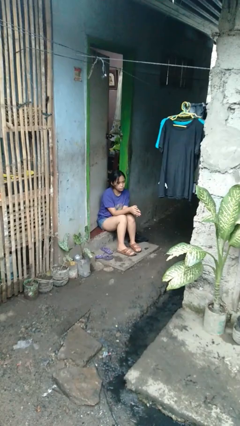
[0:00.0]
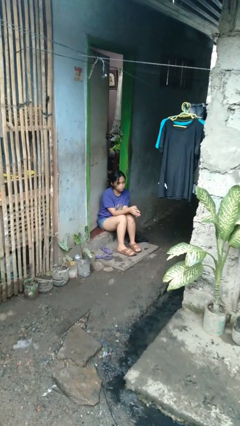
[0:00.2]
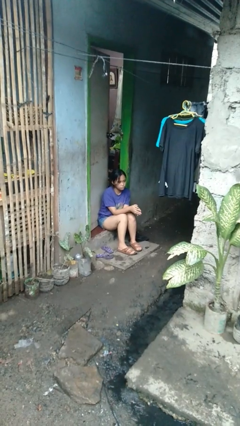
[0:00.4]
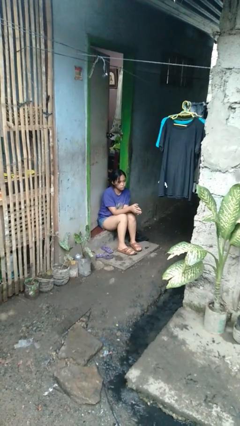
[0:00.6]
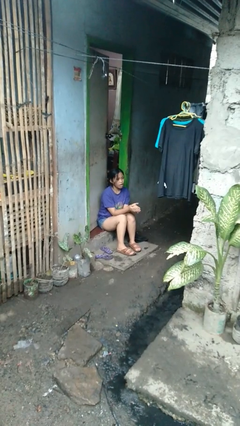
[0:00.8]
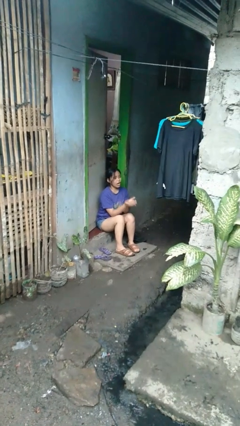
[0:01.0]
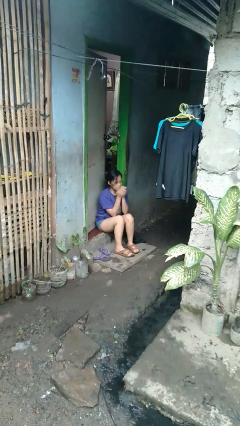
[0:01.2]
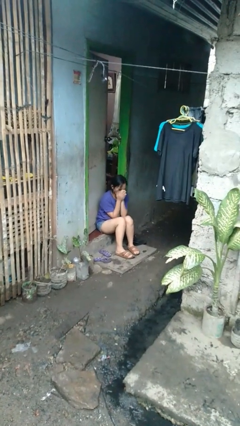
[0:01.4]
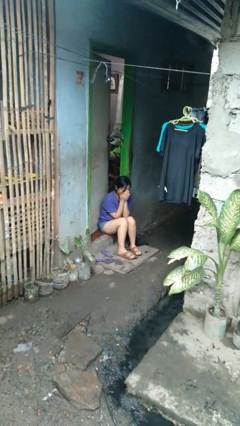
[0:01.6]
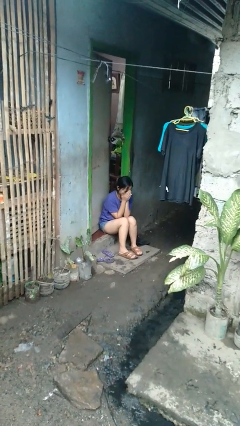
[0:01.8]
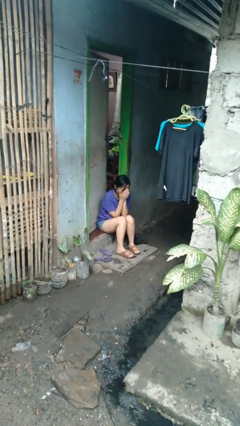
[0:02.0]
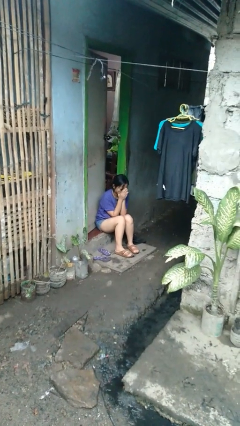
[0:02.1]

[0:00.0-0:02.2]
person sneezes into hand

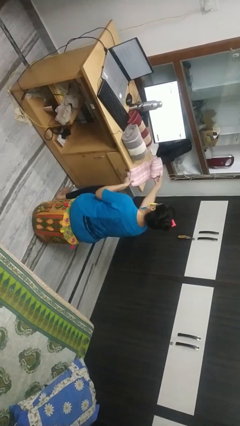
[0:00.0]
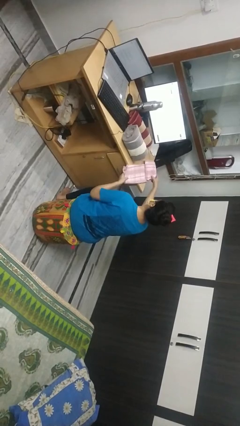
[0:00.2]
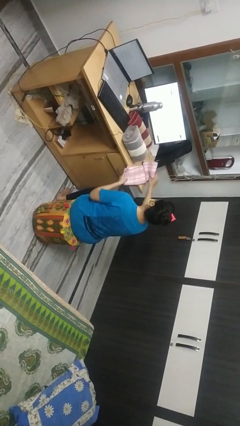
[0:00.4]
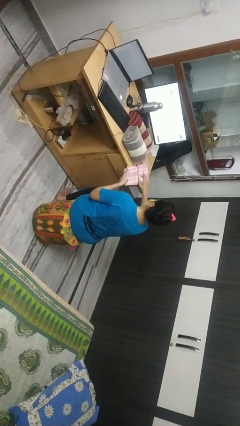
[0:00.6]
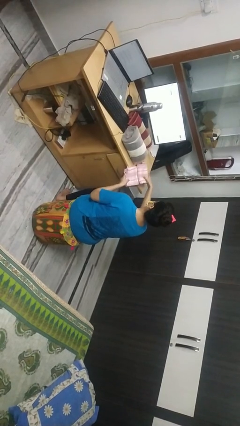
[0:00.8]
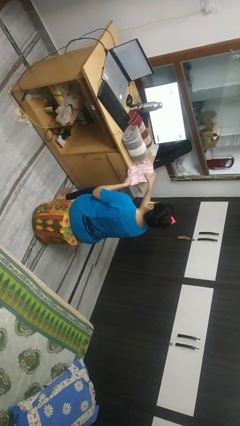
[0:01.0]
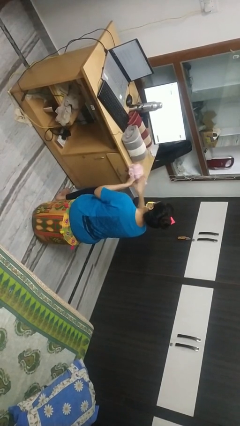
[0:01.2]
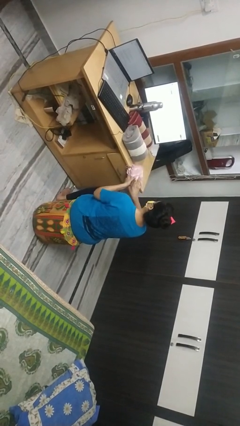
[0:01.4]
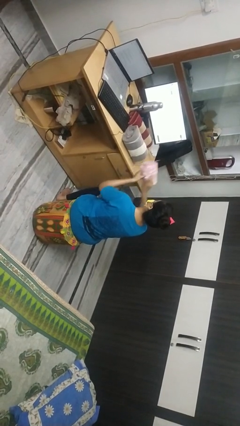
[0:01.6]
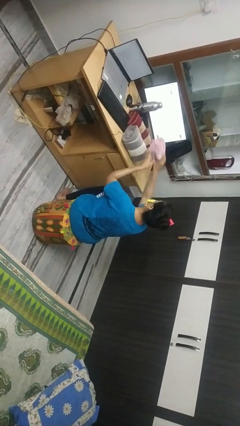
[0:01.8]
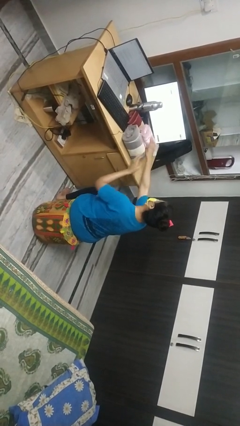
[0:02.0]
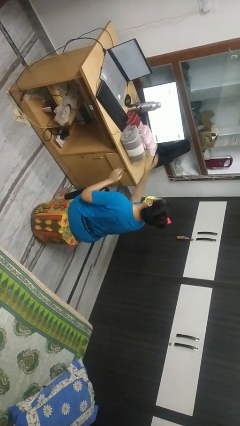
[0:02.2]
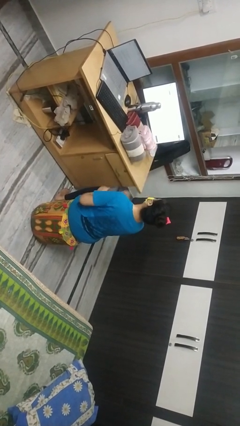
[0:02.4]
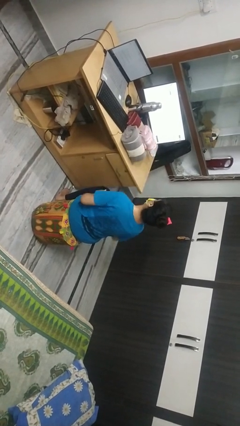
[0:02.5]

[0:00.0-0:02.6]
person folds towel

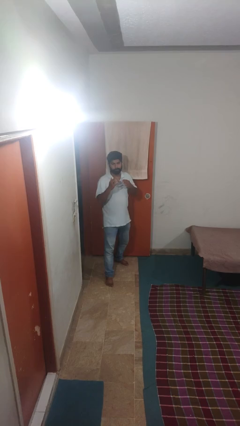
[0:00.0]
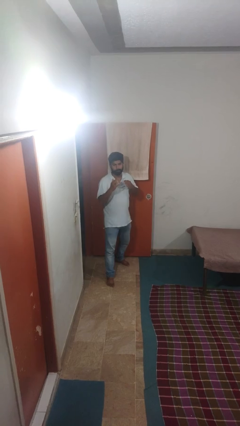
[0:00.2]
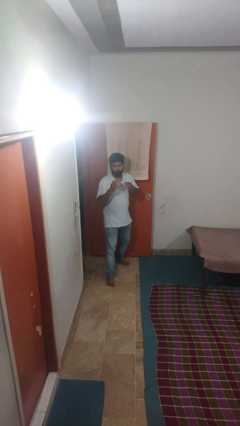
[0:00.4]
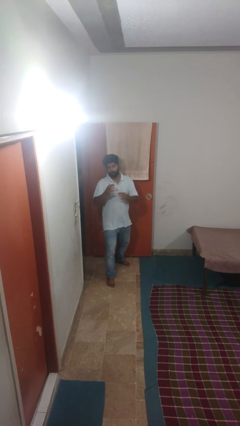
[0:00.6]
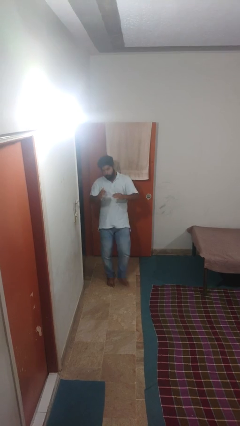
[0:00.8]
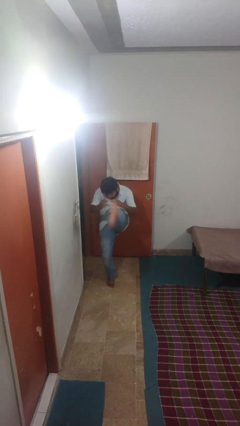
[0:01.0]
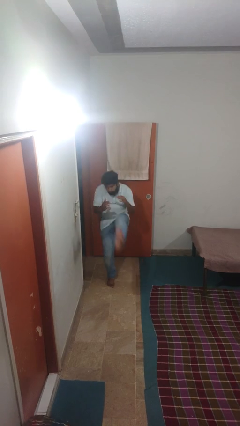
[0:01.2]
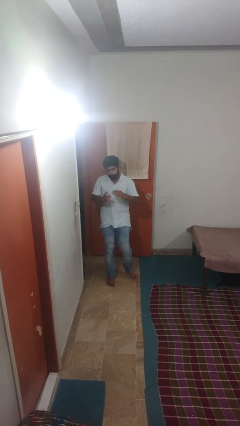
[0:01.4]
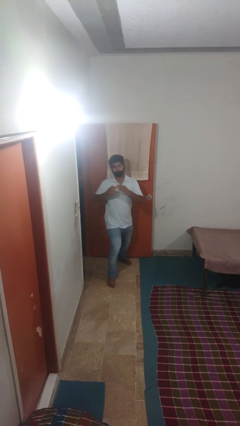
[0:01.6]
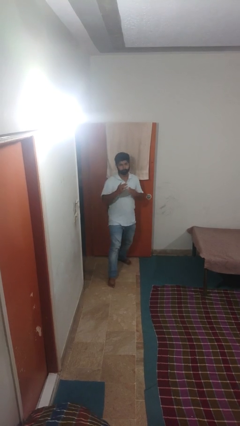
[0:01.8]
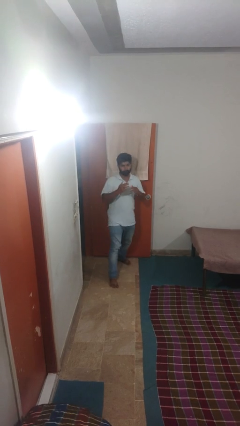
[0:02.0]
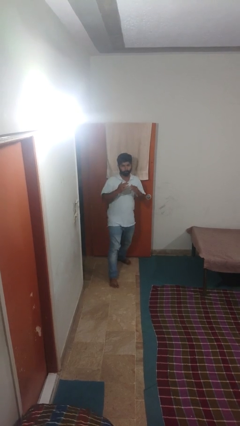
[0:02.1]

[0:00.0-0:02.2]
person karate kicks

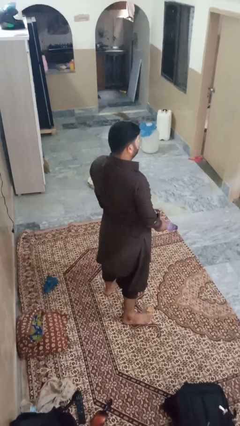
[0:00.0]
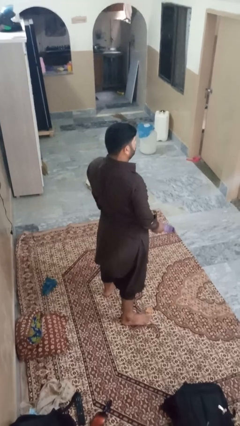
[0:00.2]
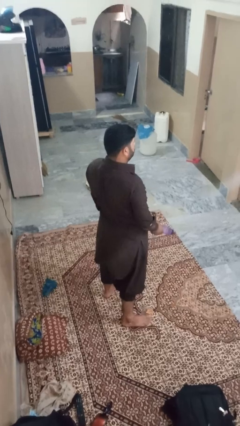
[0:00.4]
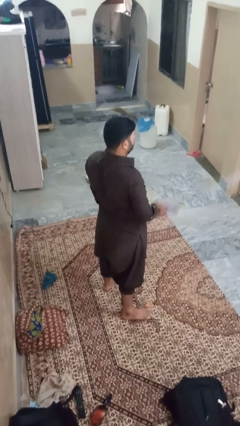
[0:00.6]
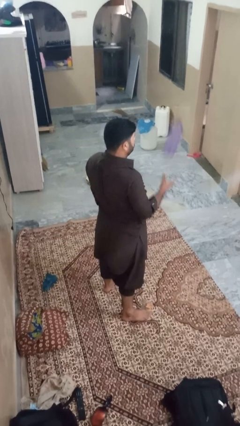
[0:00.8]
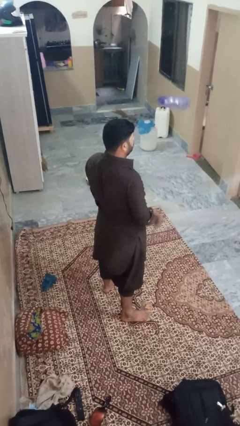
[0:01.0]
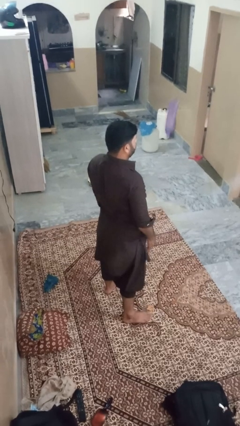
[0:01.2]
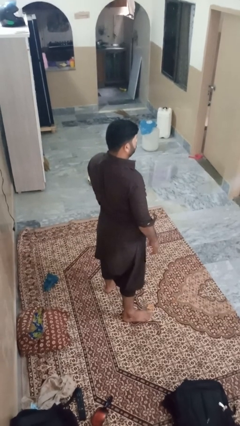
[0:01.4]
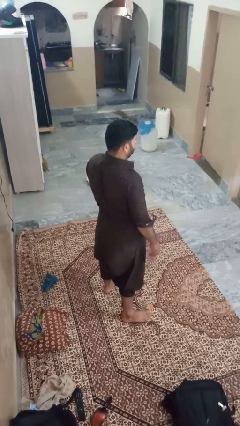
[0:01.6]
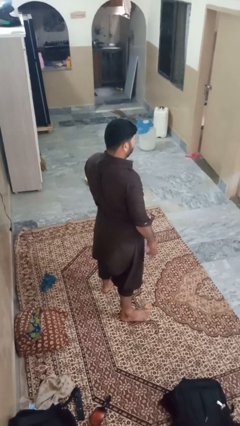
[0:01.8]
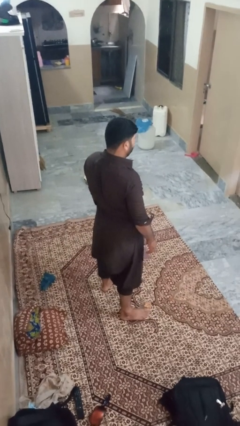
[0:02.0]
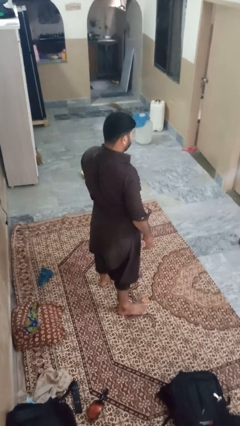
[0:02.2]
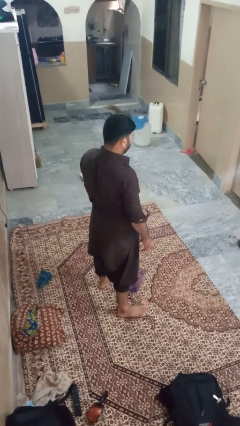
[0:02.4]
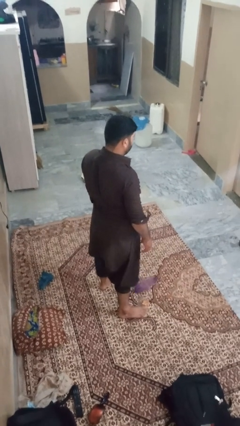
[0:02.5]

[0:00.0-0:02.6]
person throws object into air

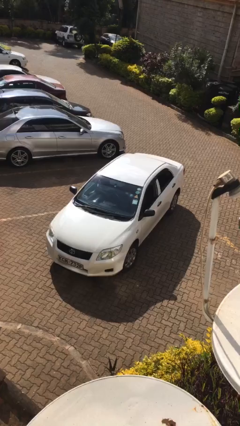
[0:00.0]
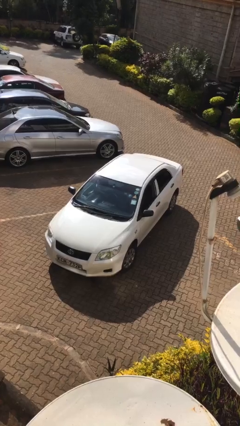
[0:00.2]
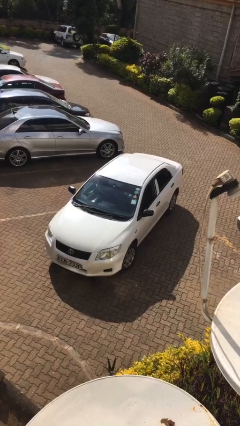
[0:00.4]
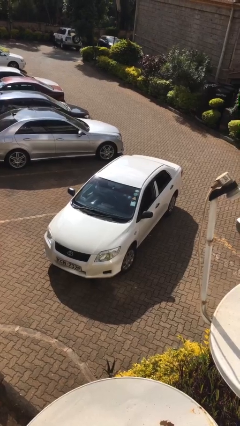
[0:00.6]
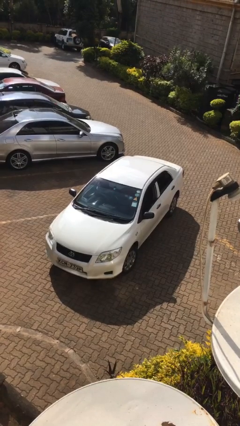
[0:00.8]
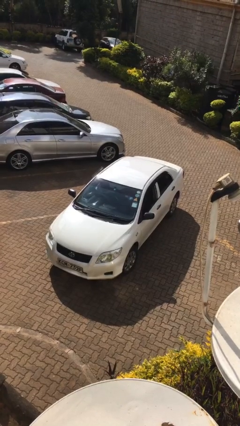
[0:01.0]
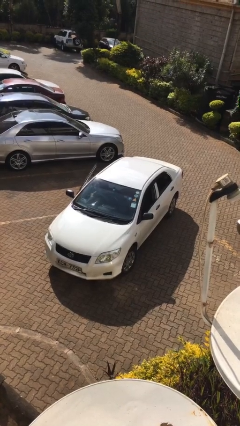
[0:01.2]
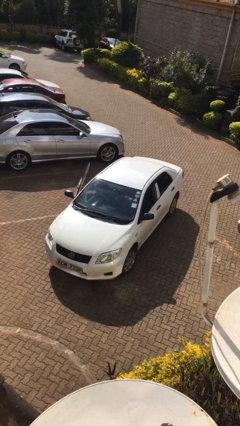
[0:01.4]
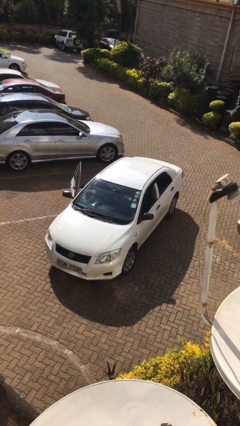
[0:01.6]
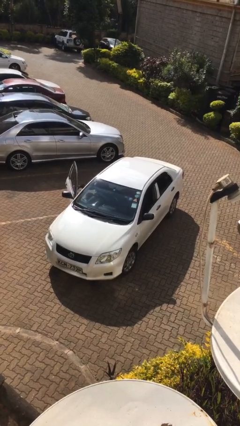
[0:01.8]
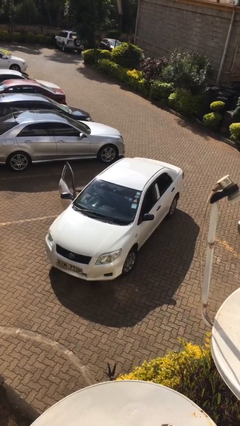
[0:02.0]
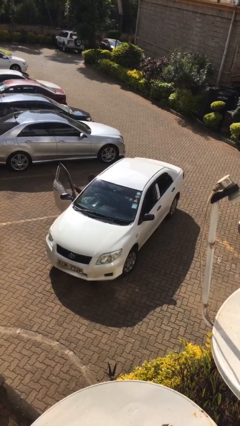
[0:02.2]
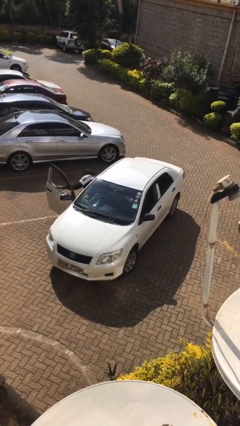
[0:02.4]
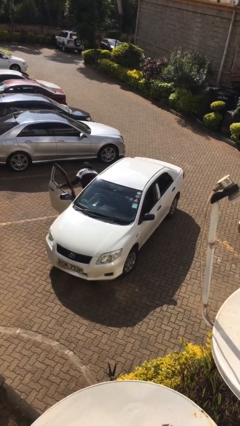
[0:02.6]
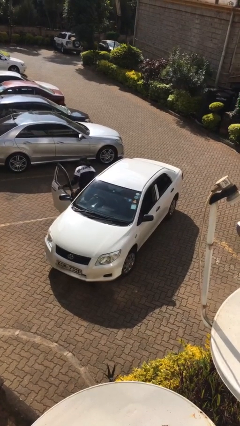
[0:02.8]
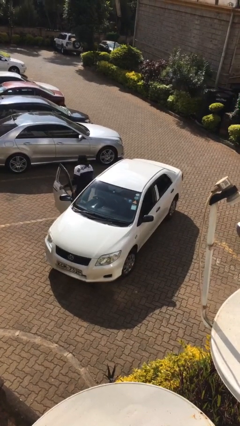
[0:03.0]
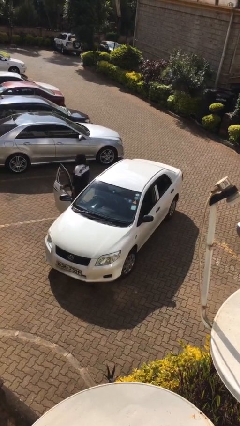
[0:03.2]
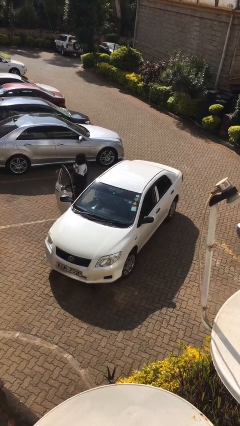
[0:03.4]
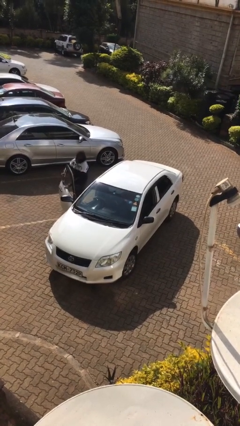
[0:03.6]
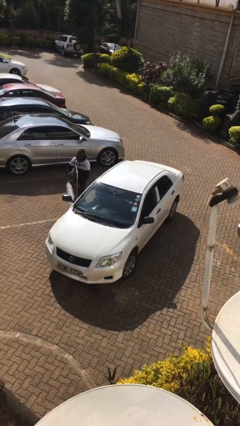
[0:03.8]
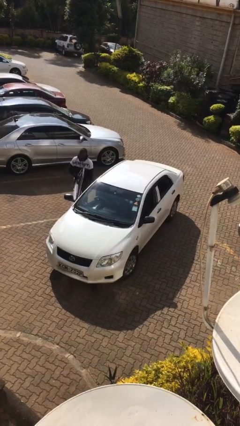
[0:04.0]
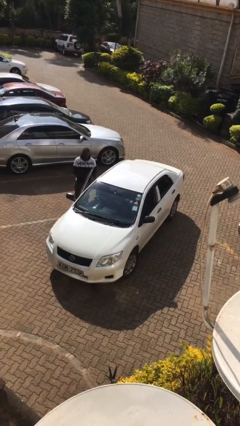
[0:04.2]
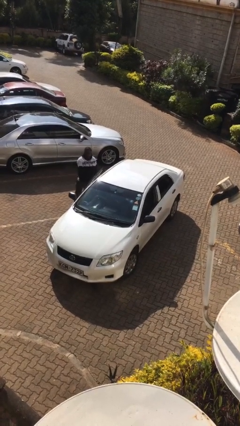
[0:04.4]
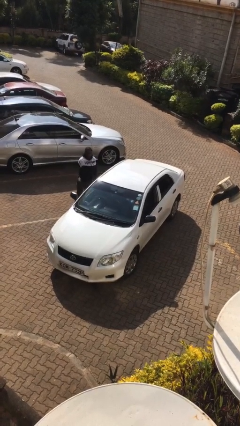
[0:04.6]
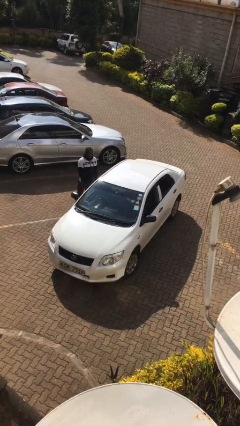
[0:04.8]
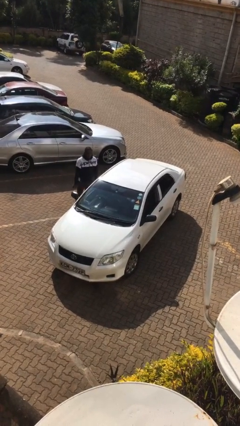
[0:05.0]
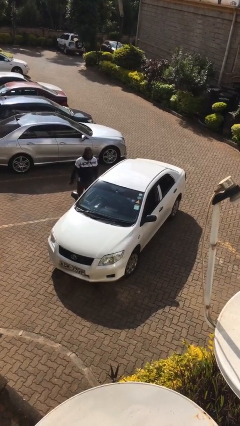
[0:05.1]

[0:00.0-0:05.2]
car drops off person

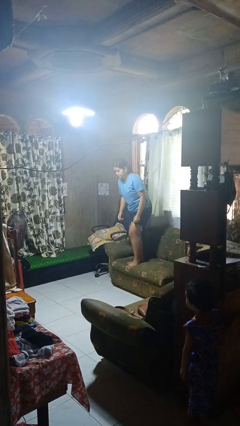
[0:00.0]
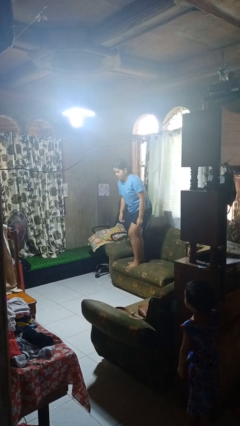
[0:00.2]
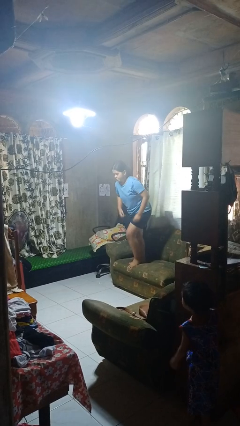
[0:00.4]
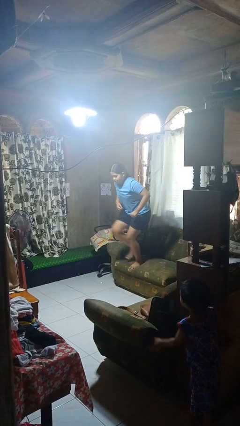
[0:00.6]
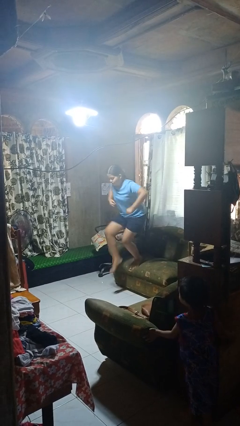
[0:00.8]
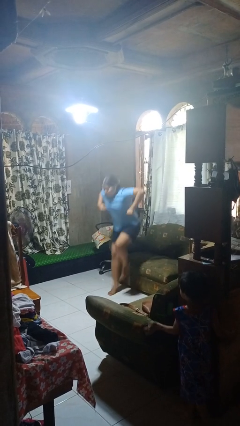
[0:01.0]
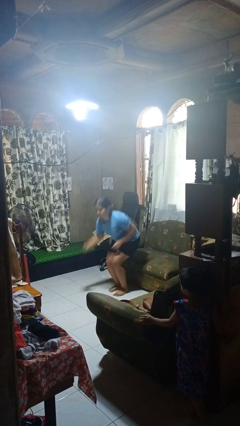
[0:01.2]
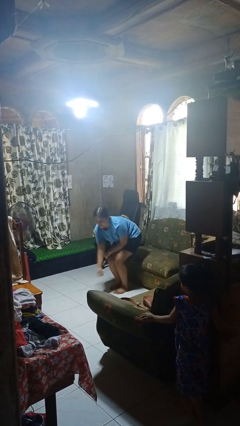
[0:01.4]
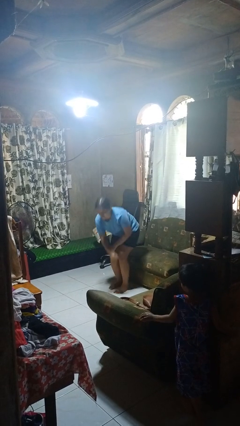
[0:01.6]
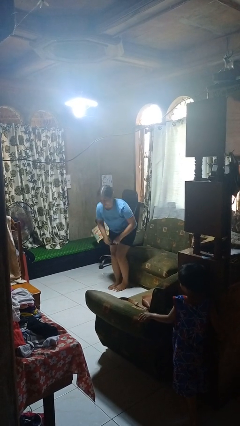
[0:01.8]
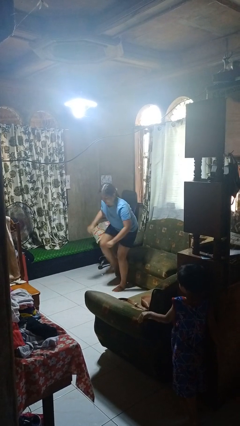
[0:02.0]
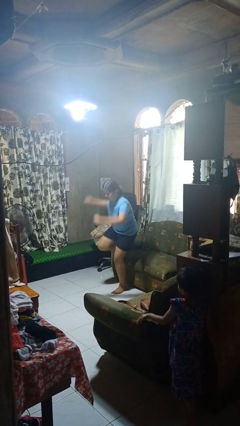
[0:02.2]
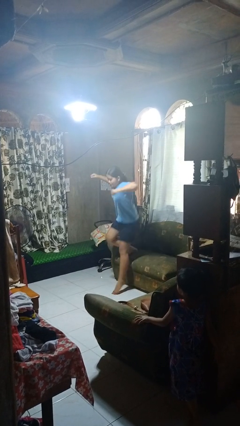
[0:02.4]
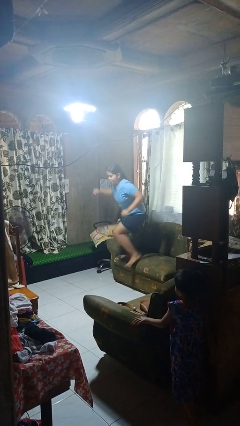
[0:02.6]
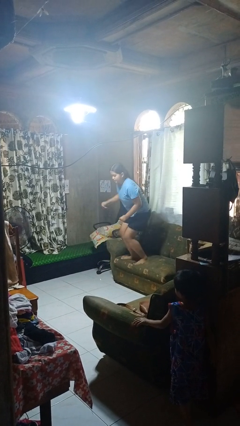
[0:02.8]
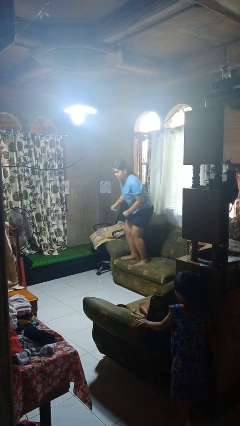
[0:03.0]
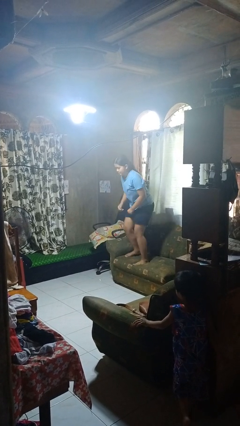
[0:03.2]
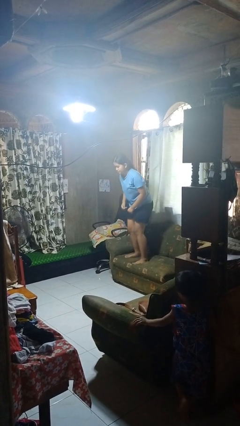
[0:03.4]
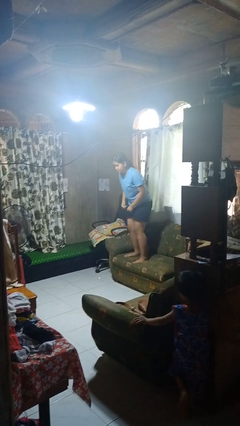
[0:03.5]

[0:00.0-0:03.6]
person jumps on couch
